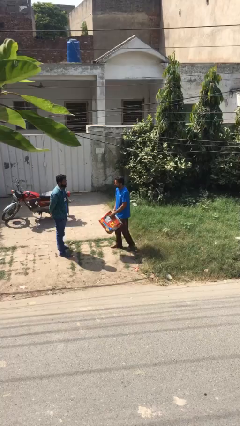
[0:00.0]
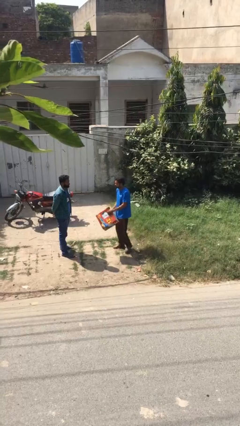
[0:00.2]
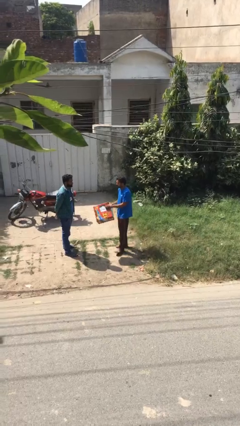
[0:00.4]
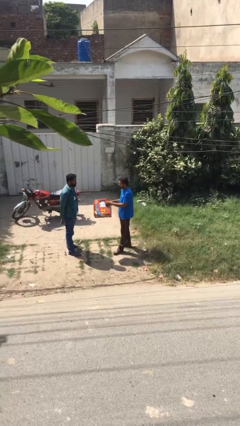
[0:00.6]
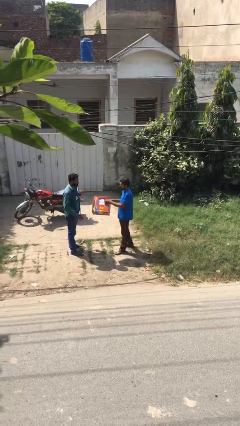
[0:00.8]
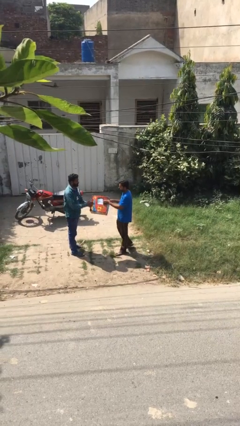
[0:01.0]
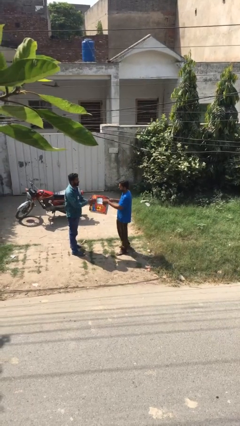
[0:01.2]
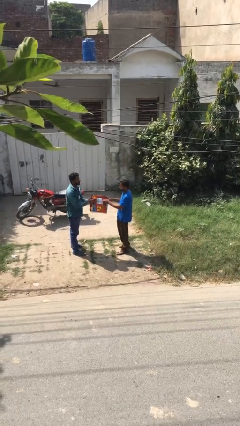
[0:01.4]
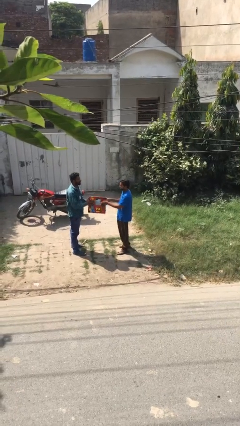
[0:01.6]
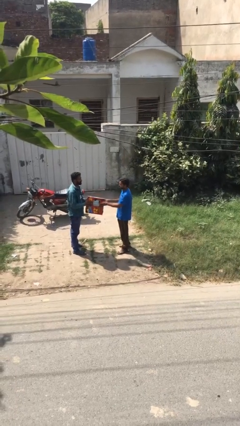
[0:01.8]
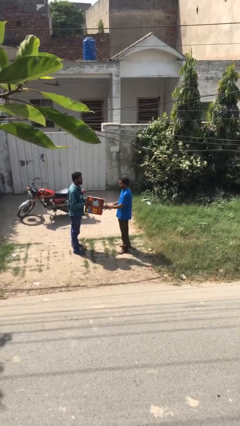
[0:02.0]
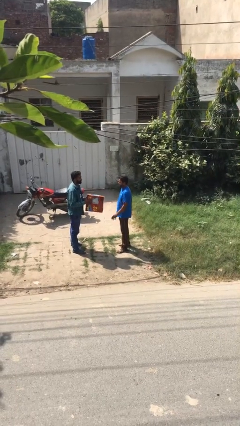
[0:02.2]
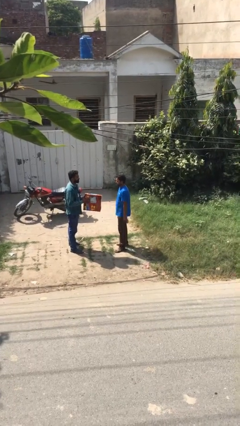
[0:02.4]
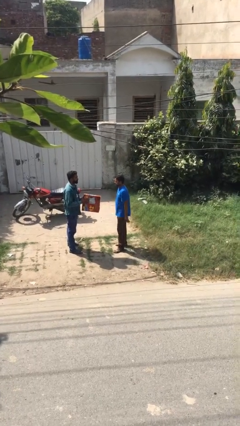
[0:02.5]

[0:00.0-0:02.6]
person transfers object to person

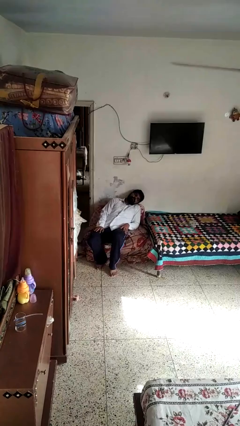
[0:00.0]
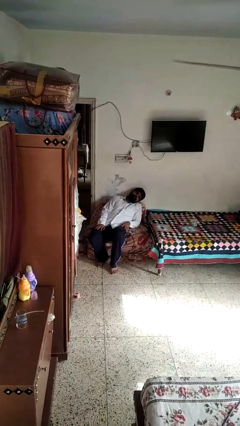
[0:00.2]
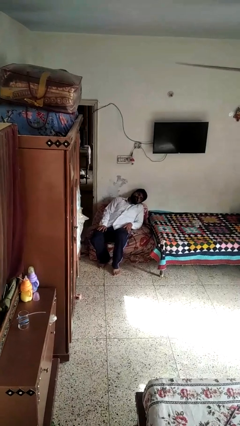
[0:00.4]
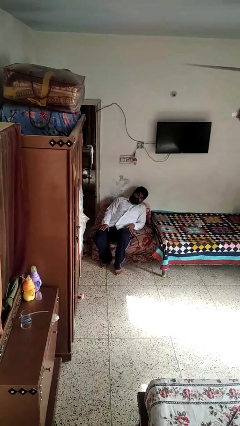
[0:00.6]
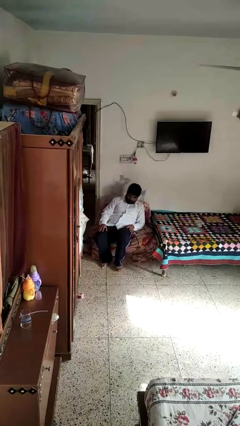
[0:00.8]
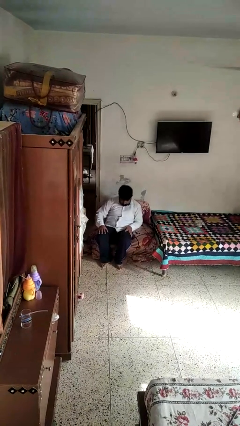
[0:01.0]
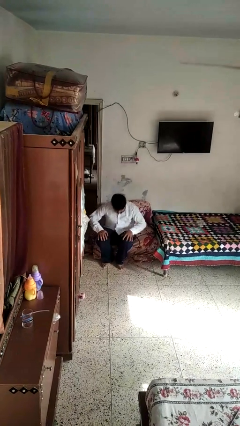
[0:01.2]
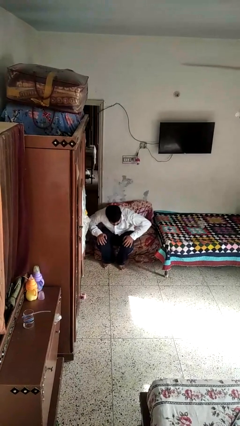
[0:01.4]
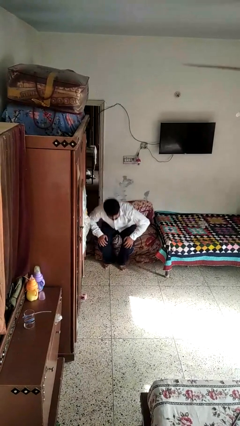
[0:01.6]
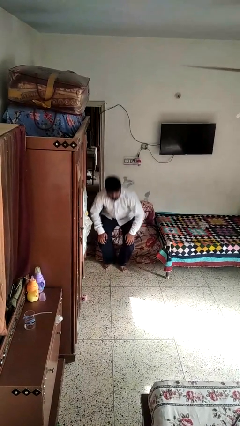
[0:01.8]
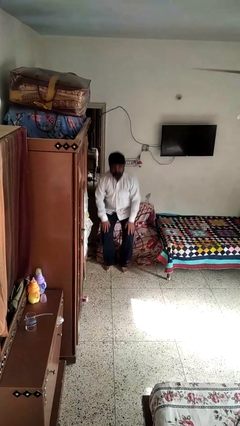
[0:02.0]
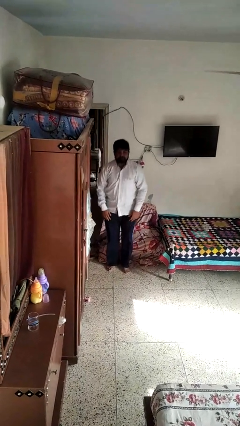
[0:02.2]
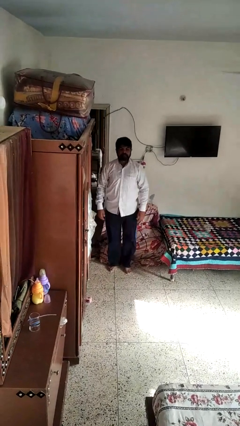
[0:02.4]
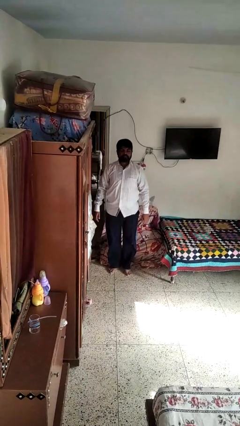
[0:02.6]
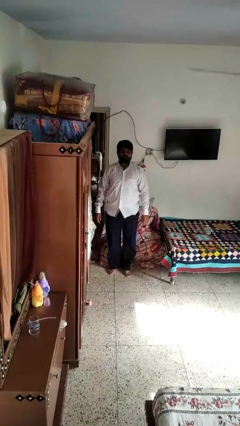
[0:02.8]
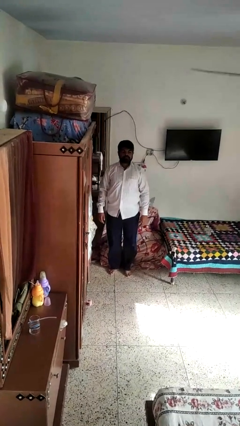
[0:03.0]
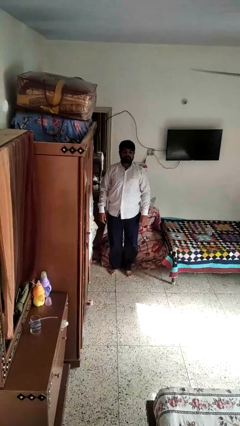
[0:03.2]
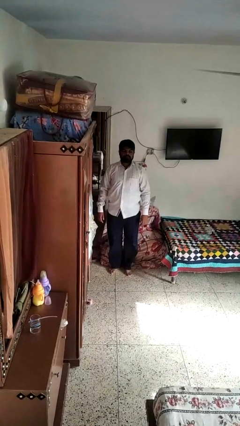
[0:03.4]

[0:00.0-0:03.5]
person stands up

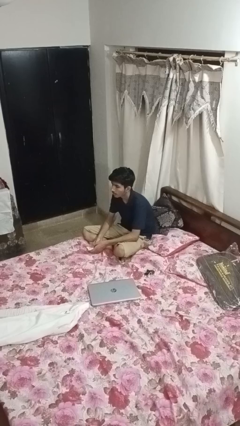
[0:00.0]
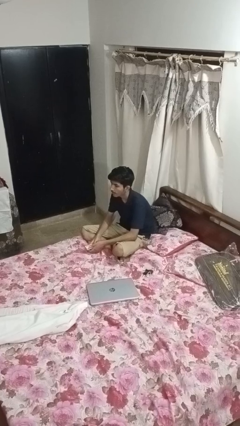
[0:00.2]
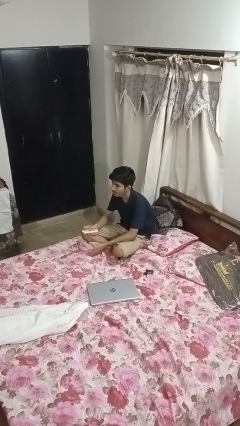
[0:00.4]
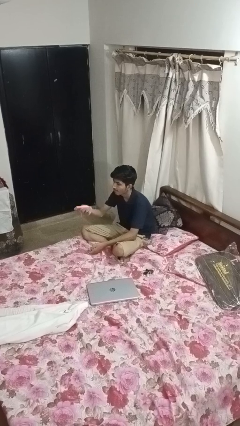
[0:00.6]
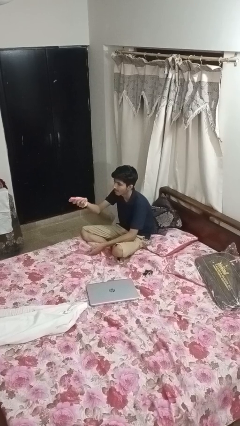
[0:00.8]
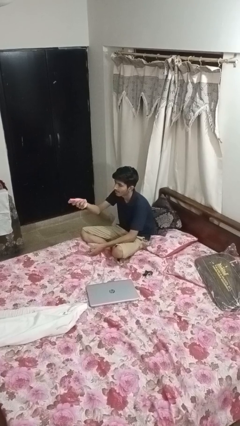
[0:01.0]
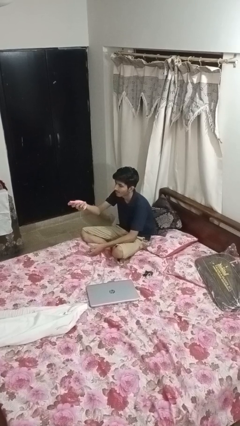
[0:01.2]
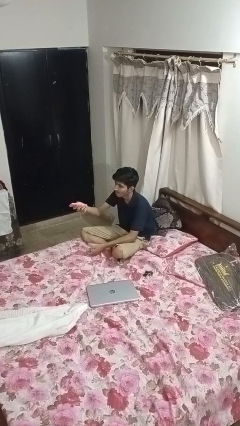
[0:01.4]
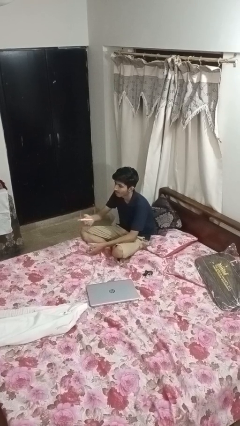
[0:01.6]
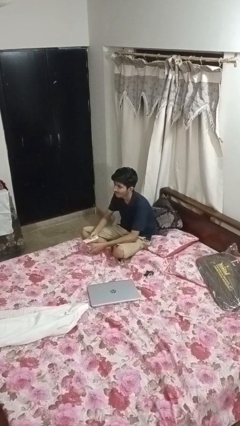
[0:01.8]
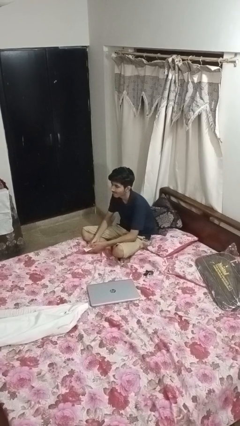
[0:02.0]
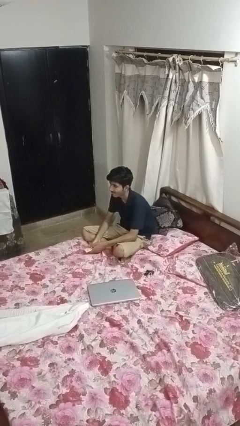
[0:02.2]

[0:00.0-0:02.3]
person uses television remote

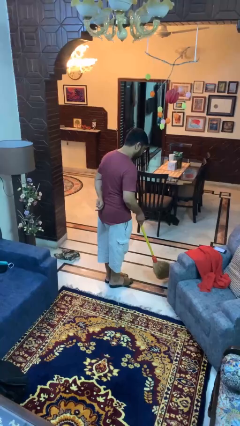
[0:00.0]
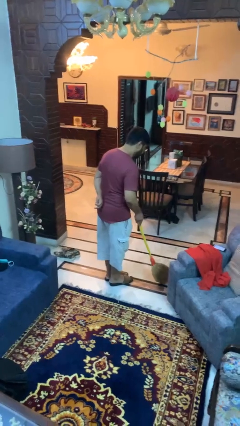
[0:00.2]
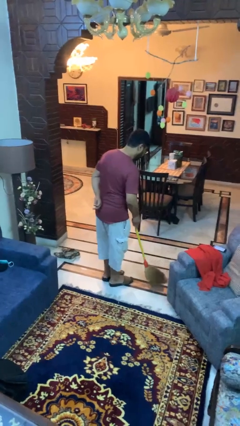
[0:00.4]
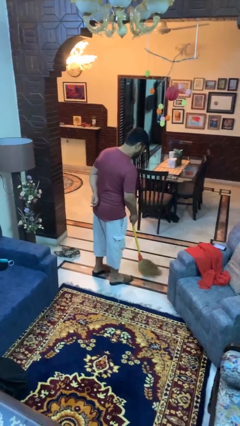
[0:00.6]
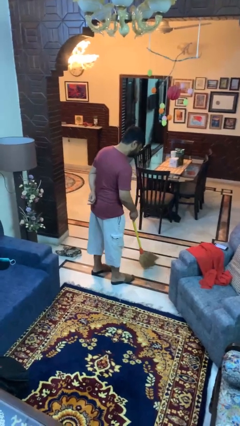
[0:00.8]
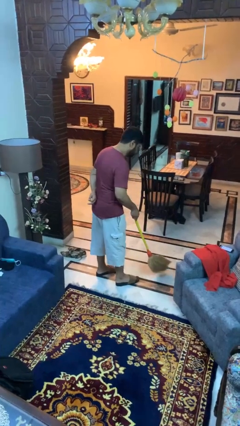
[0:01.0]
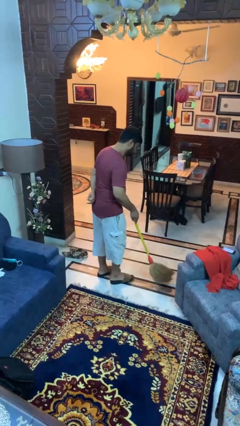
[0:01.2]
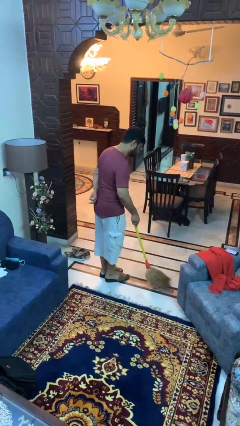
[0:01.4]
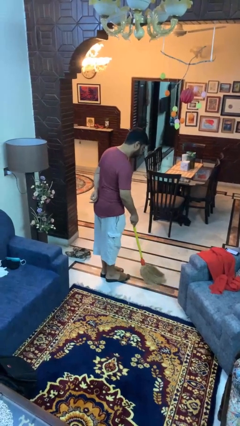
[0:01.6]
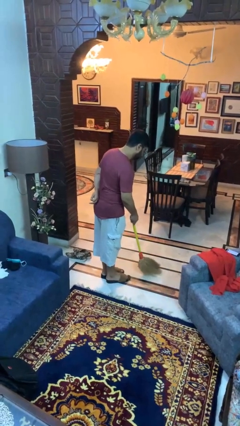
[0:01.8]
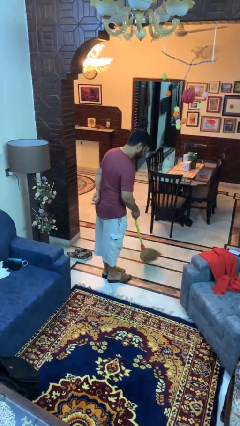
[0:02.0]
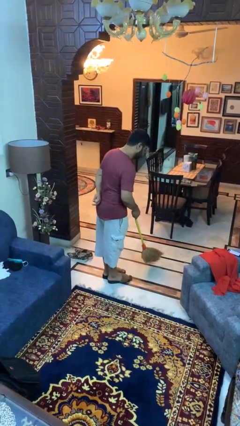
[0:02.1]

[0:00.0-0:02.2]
person sweeps floor

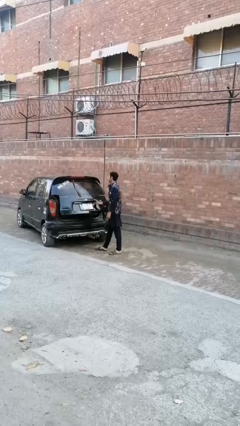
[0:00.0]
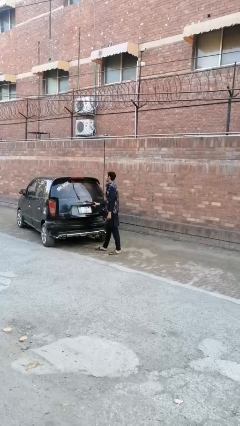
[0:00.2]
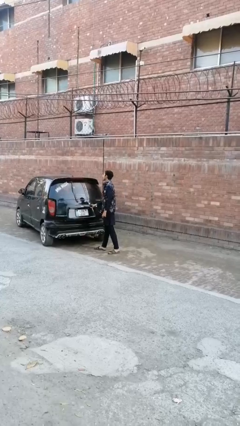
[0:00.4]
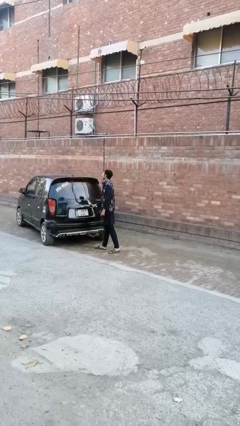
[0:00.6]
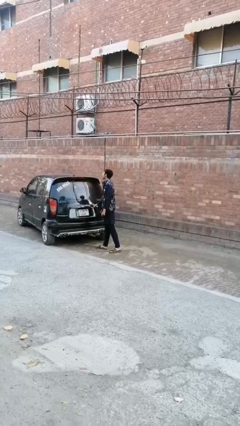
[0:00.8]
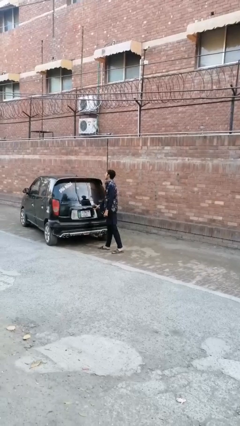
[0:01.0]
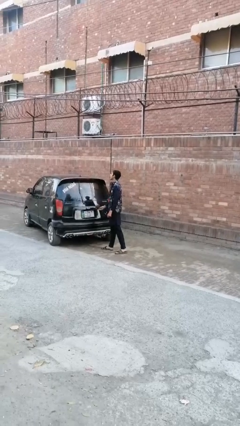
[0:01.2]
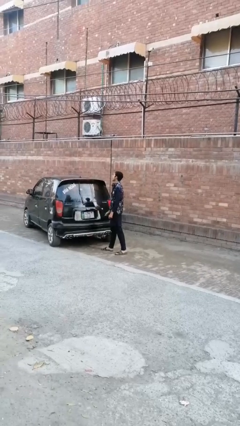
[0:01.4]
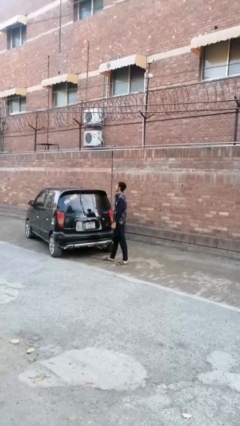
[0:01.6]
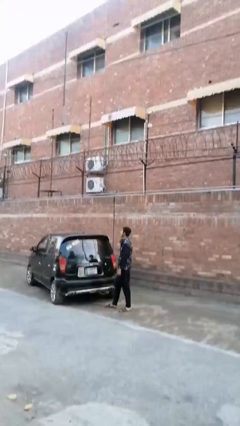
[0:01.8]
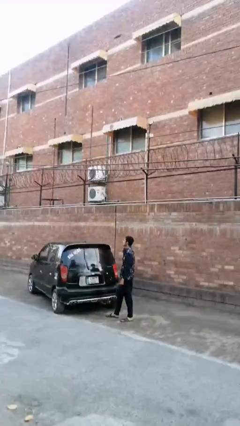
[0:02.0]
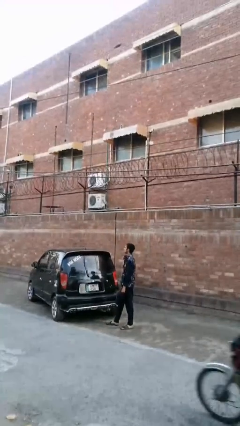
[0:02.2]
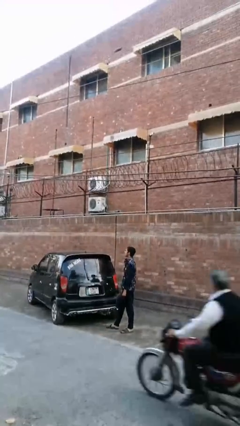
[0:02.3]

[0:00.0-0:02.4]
person closes car trunk

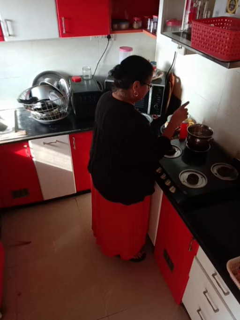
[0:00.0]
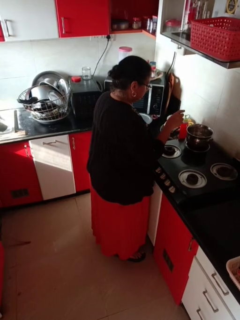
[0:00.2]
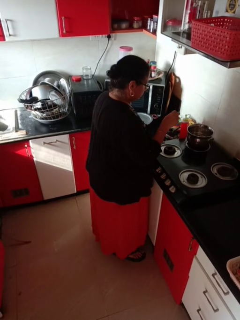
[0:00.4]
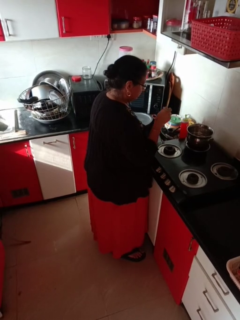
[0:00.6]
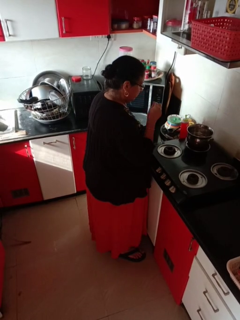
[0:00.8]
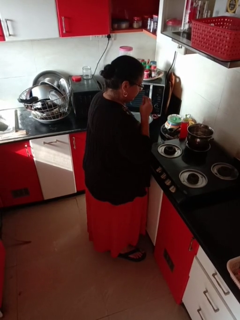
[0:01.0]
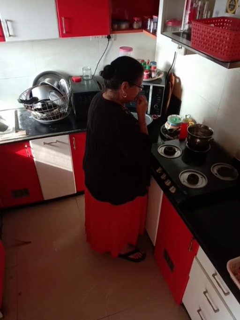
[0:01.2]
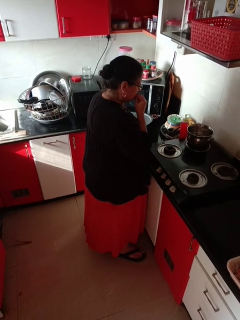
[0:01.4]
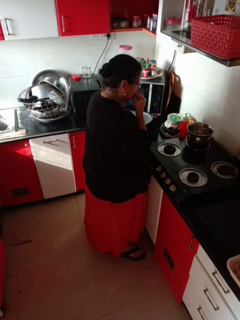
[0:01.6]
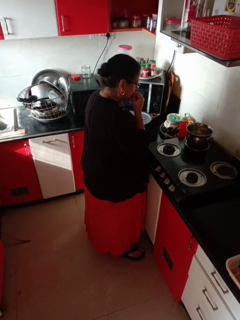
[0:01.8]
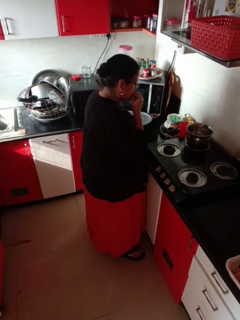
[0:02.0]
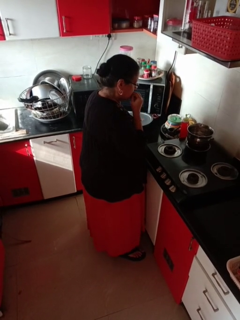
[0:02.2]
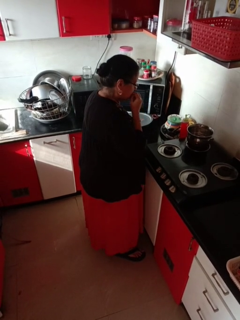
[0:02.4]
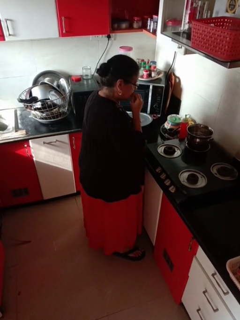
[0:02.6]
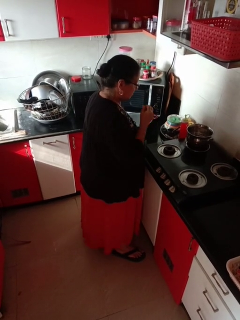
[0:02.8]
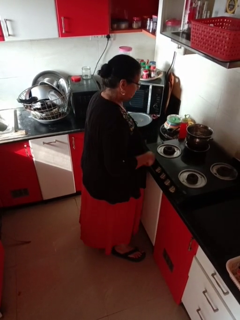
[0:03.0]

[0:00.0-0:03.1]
person burns hand

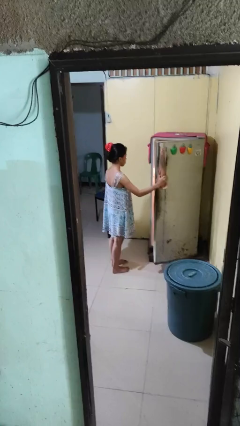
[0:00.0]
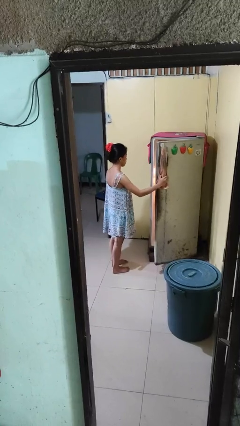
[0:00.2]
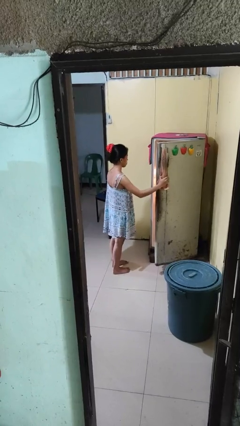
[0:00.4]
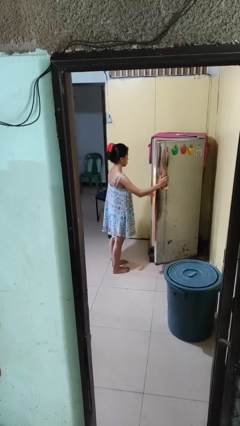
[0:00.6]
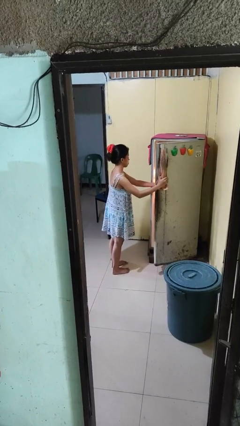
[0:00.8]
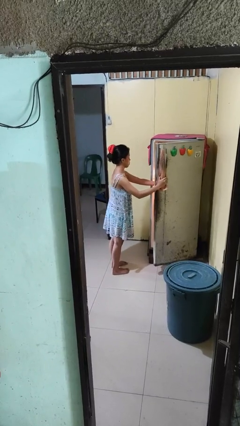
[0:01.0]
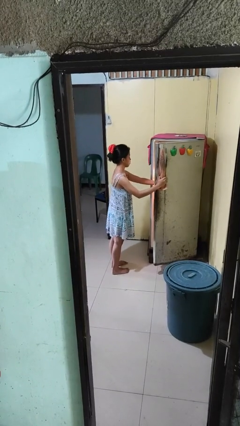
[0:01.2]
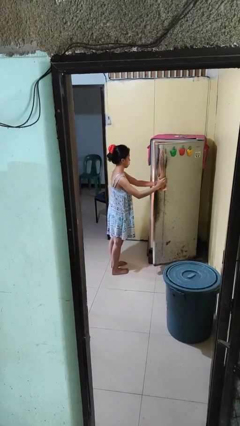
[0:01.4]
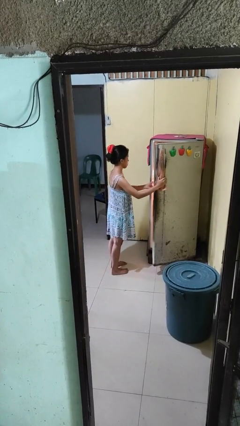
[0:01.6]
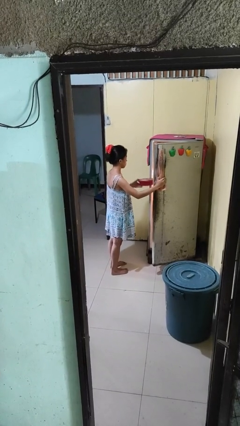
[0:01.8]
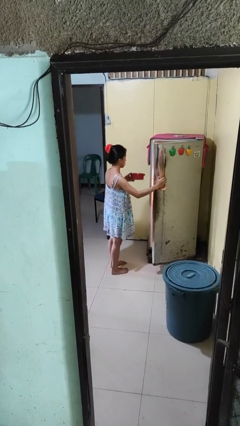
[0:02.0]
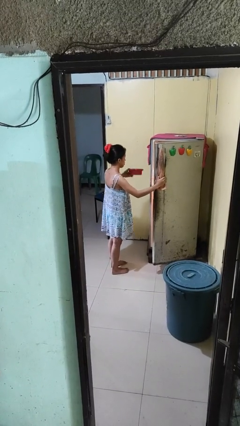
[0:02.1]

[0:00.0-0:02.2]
person takes object from refrigerator
